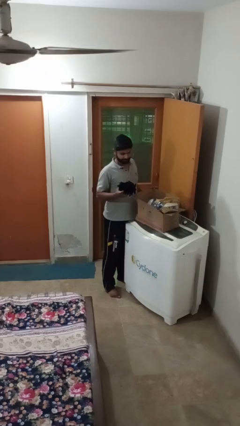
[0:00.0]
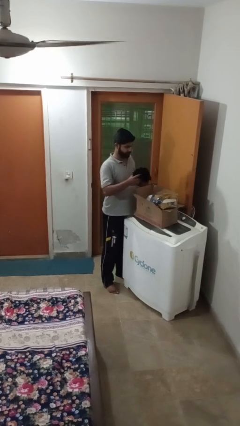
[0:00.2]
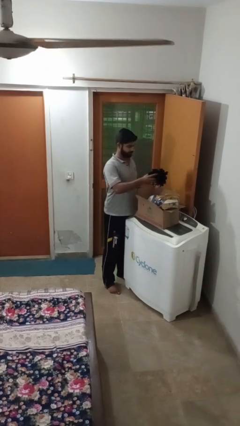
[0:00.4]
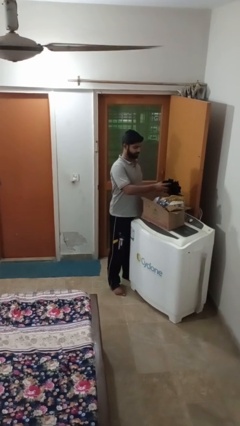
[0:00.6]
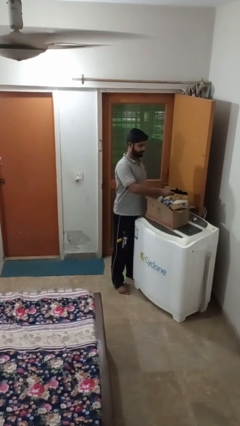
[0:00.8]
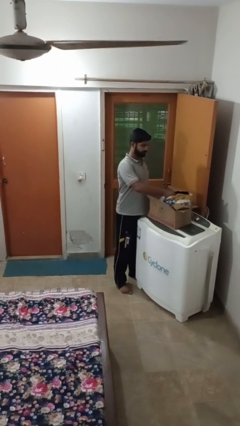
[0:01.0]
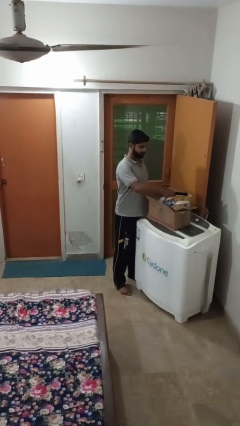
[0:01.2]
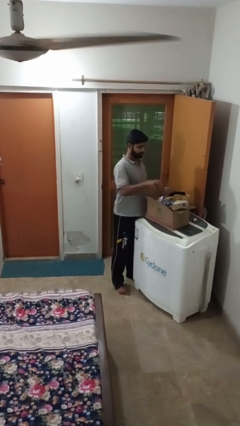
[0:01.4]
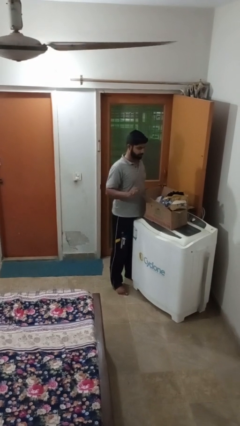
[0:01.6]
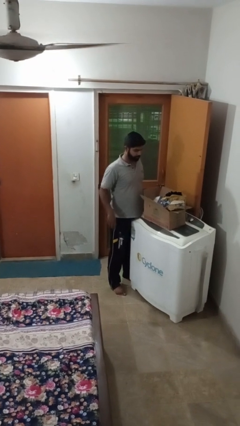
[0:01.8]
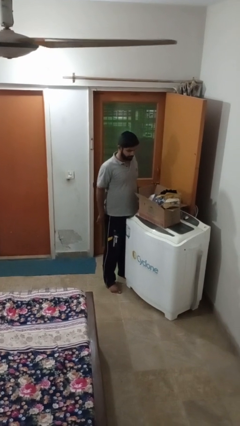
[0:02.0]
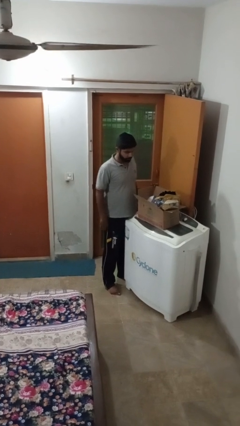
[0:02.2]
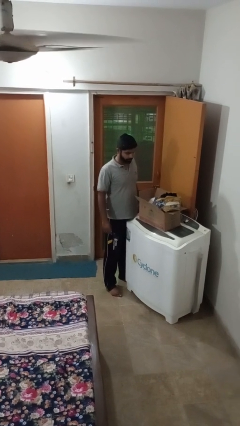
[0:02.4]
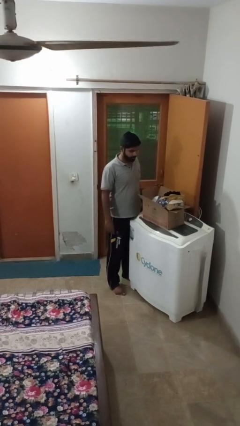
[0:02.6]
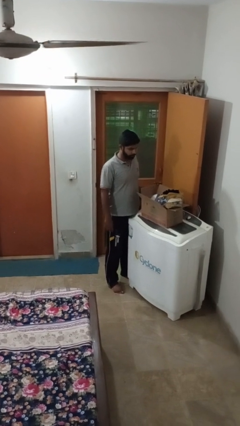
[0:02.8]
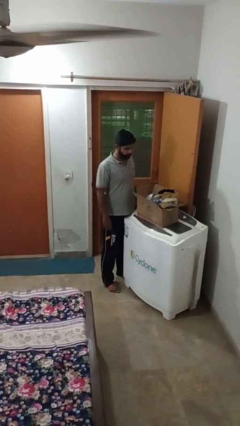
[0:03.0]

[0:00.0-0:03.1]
person puts object into box

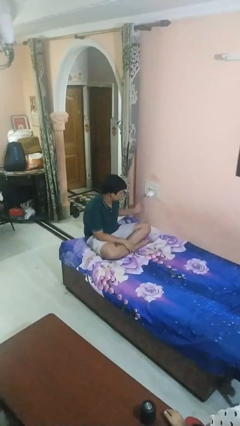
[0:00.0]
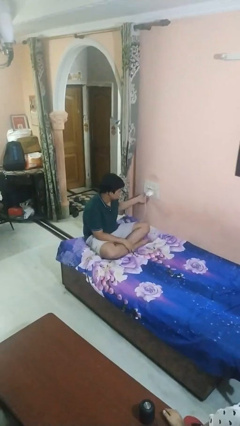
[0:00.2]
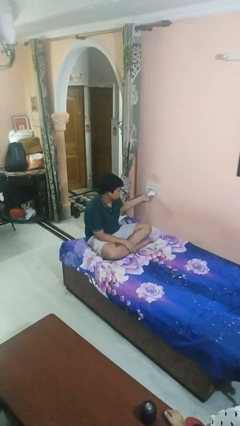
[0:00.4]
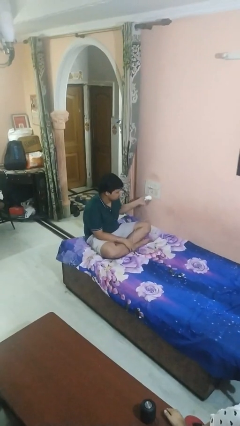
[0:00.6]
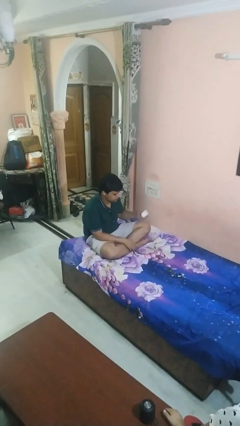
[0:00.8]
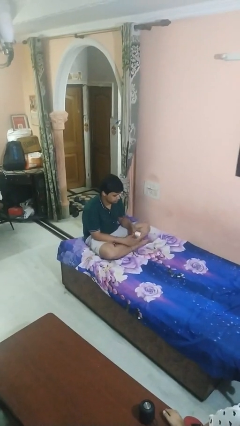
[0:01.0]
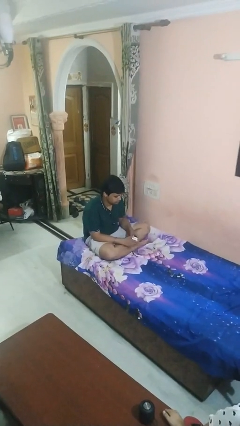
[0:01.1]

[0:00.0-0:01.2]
person unplugs from electrical socket

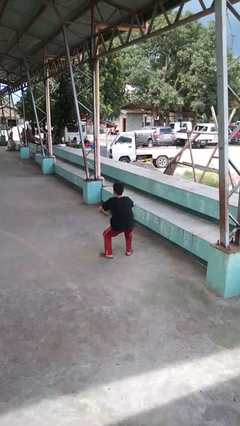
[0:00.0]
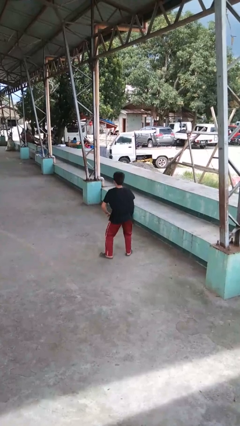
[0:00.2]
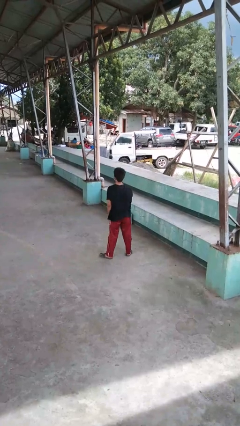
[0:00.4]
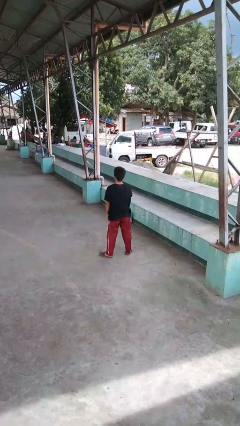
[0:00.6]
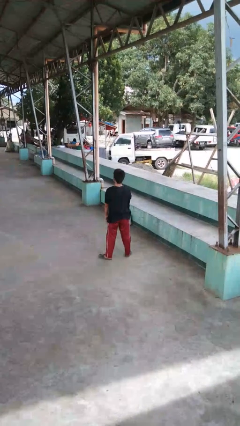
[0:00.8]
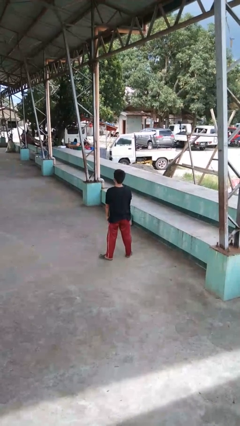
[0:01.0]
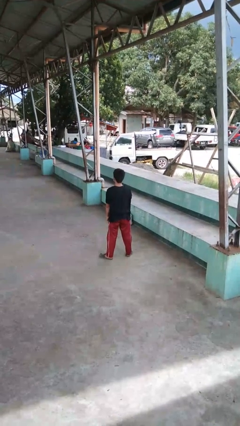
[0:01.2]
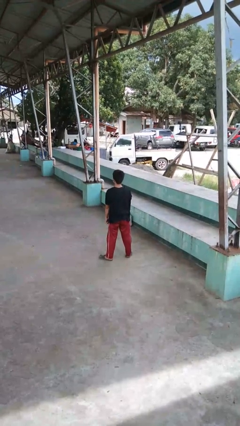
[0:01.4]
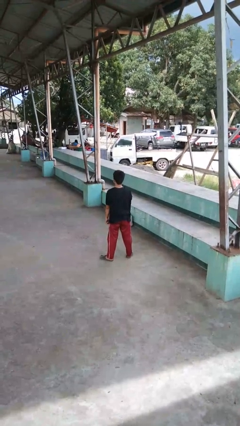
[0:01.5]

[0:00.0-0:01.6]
person stands up

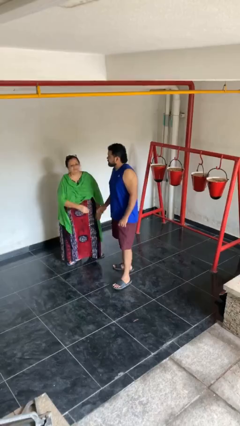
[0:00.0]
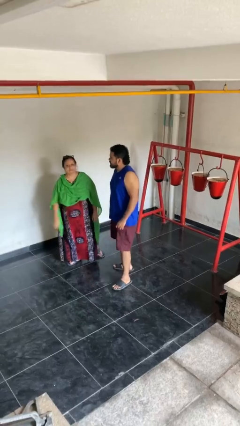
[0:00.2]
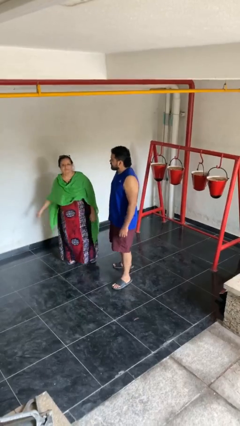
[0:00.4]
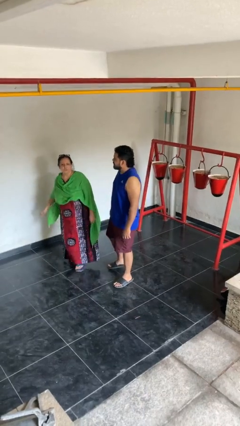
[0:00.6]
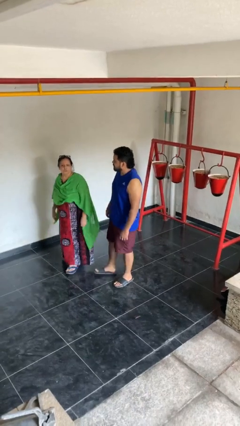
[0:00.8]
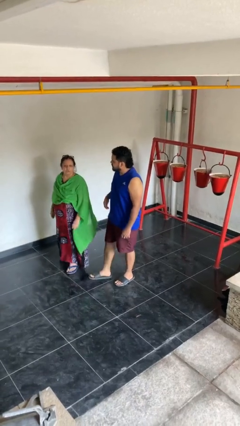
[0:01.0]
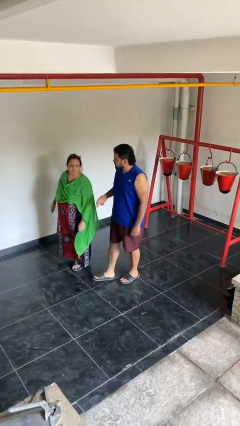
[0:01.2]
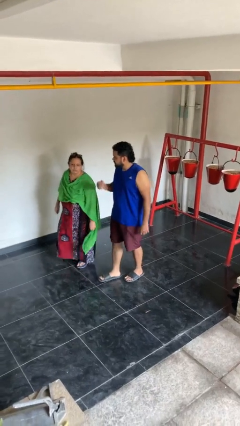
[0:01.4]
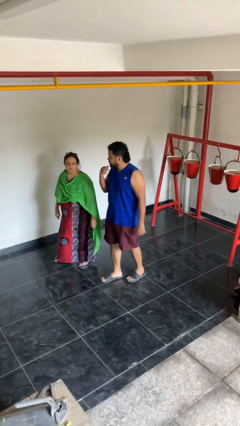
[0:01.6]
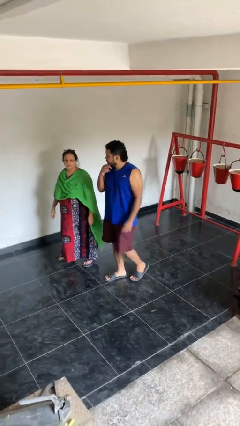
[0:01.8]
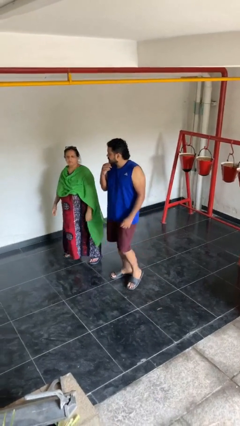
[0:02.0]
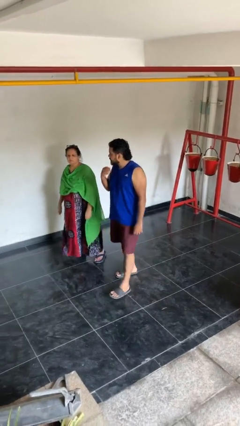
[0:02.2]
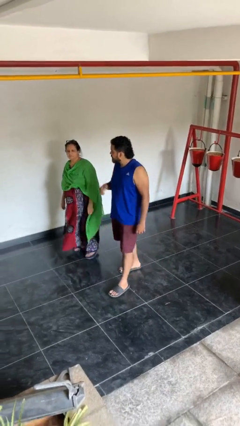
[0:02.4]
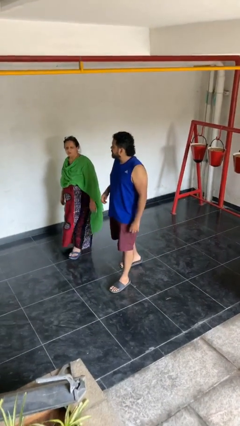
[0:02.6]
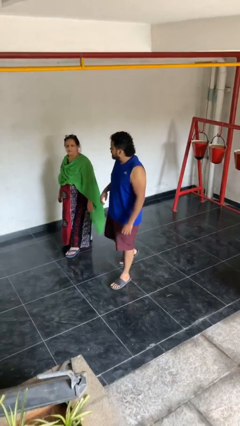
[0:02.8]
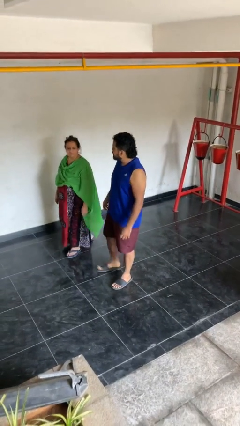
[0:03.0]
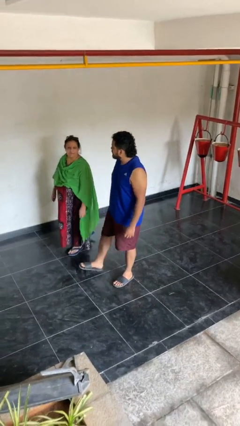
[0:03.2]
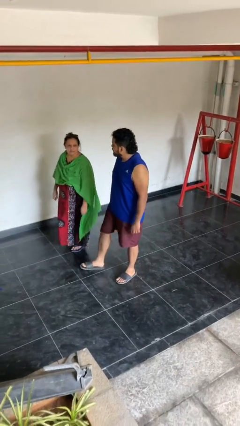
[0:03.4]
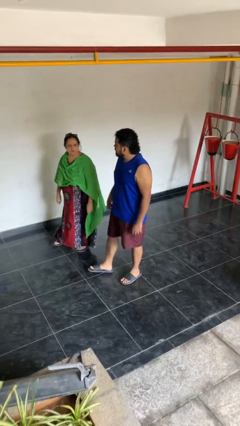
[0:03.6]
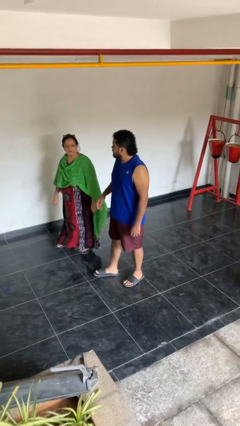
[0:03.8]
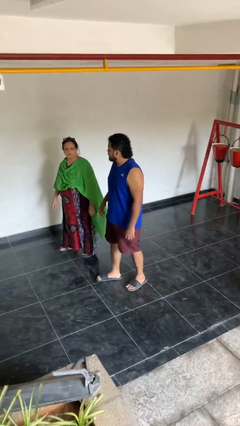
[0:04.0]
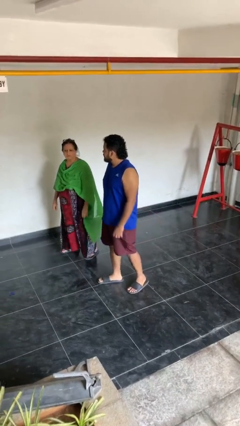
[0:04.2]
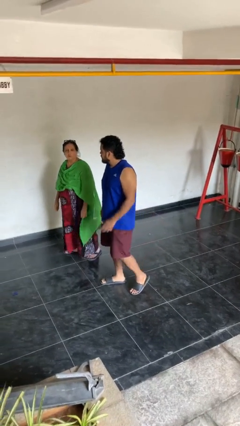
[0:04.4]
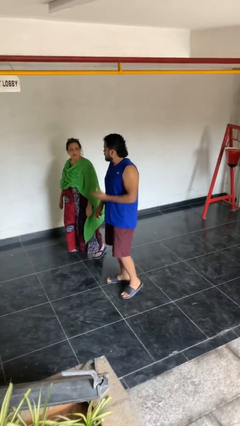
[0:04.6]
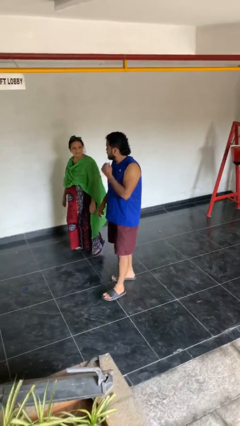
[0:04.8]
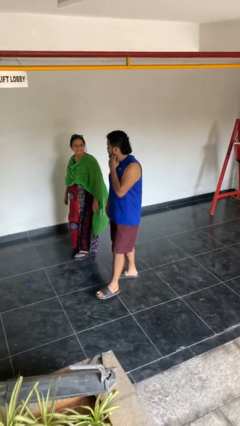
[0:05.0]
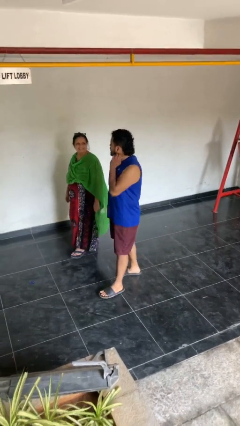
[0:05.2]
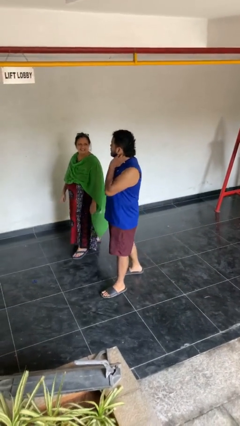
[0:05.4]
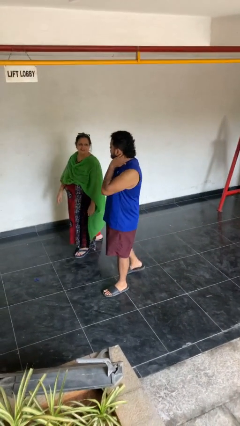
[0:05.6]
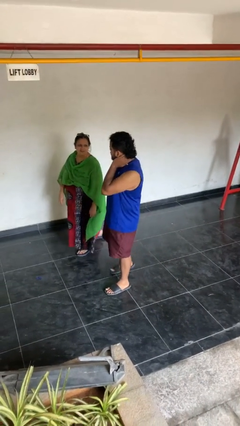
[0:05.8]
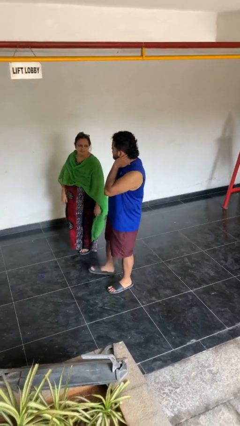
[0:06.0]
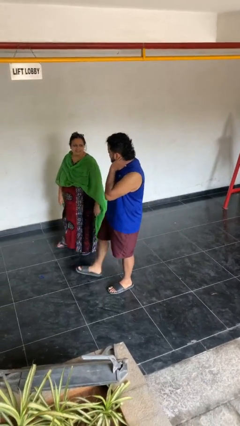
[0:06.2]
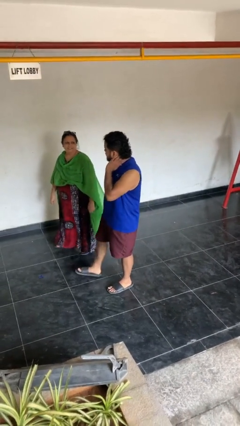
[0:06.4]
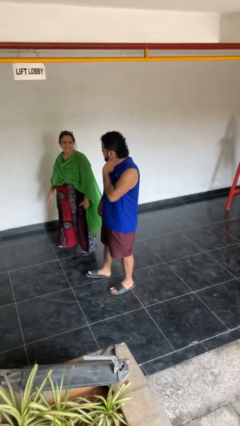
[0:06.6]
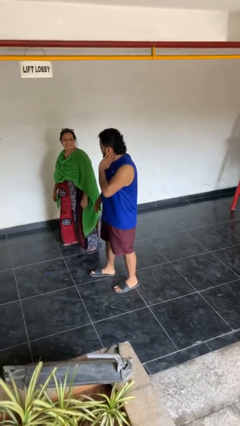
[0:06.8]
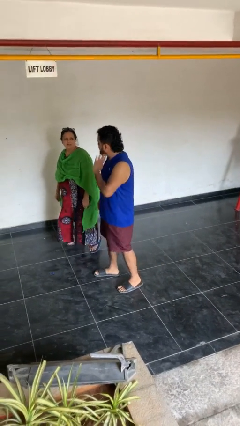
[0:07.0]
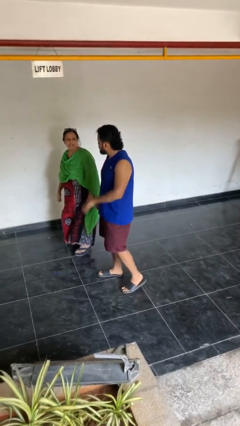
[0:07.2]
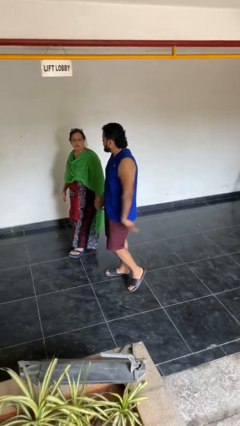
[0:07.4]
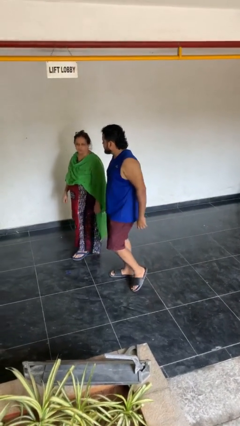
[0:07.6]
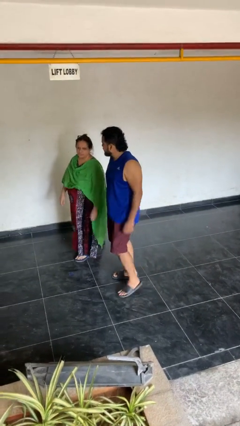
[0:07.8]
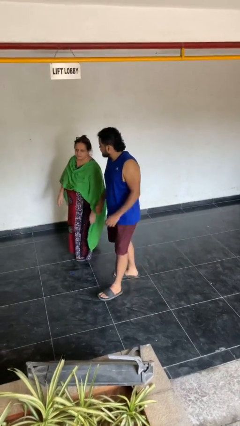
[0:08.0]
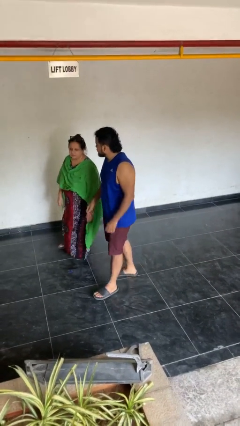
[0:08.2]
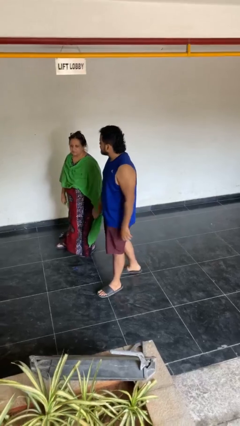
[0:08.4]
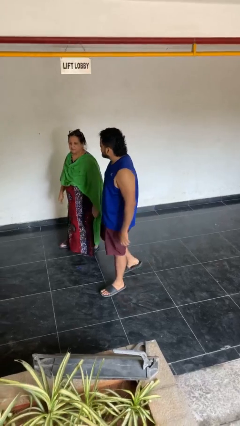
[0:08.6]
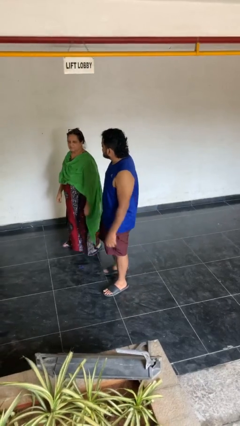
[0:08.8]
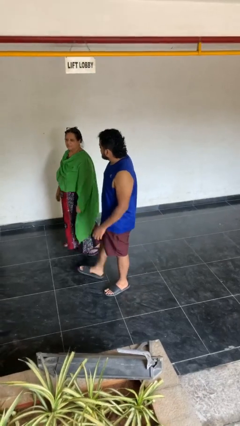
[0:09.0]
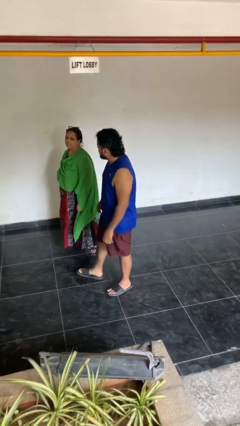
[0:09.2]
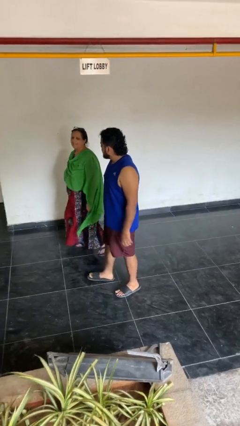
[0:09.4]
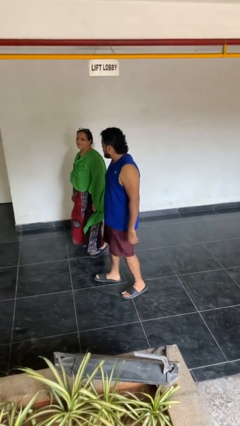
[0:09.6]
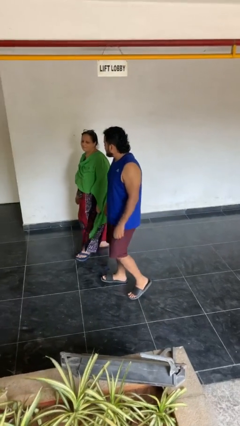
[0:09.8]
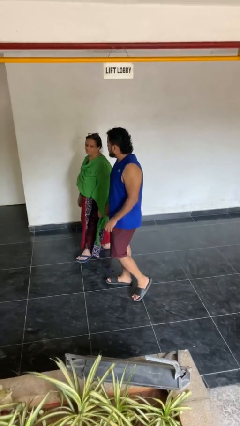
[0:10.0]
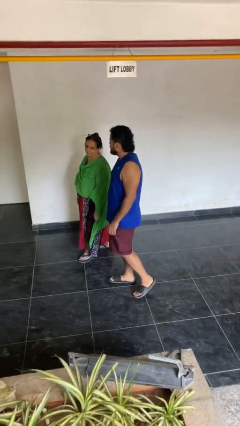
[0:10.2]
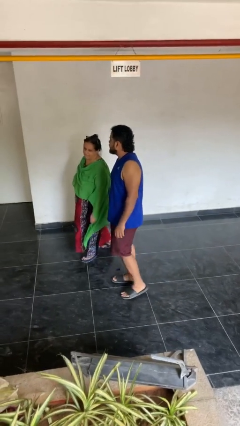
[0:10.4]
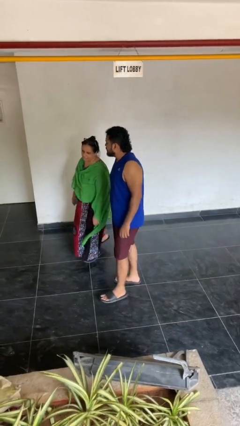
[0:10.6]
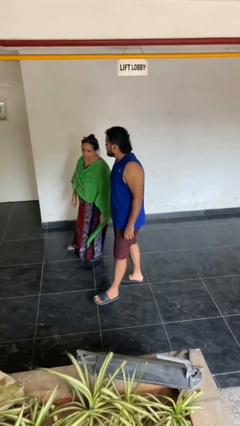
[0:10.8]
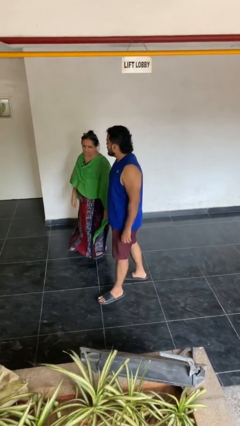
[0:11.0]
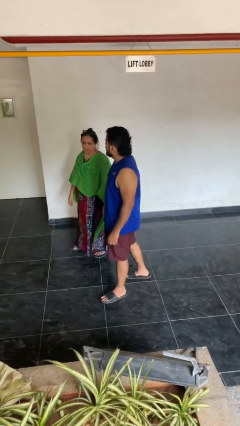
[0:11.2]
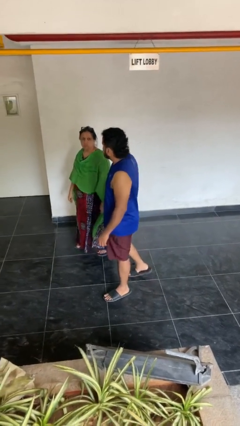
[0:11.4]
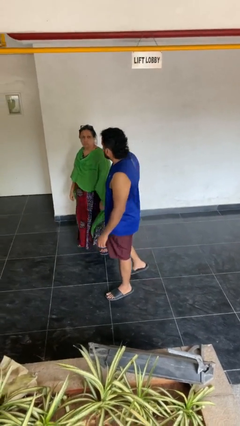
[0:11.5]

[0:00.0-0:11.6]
person talks to person

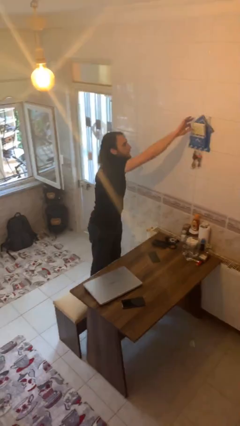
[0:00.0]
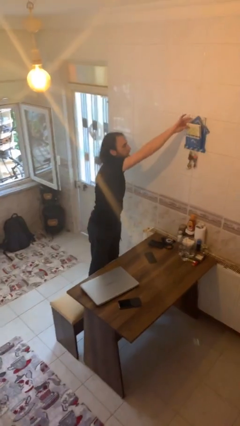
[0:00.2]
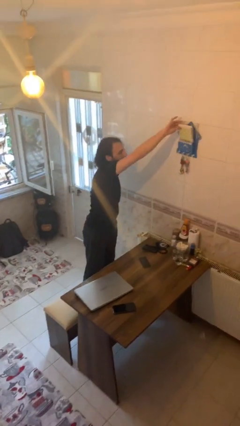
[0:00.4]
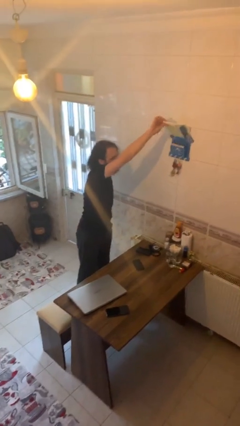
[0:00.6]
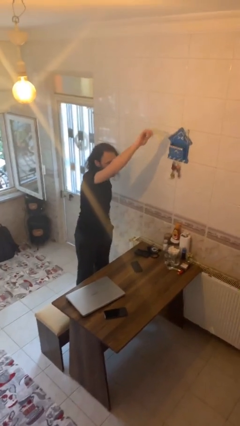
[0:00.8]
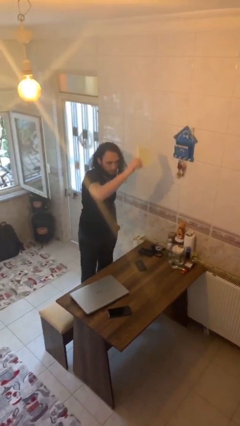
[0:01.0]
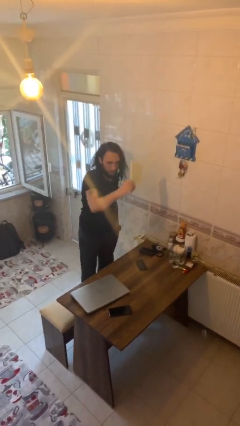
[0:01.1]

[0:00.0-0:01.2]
person picks up object from shelf
